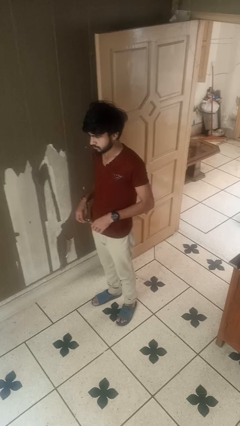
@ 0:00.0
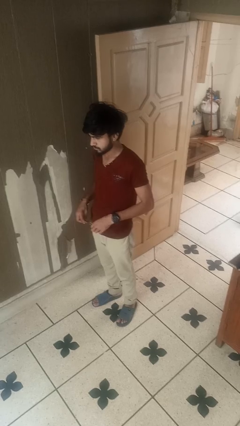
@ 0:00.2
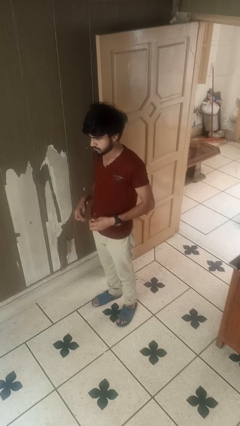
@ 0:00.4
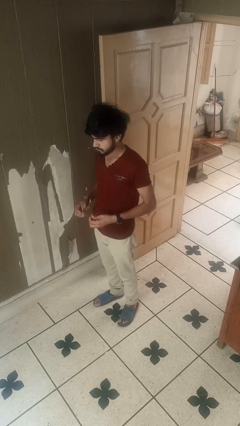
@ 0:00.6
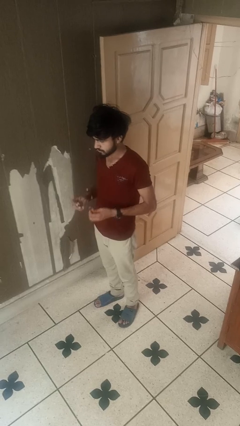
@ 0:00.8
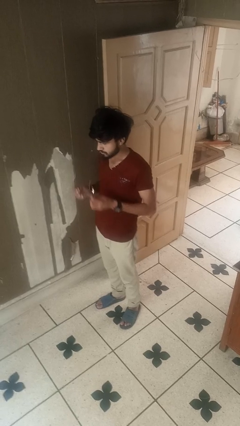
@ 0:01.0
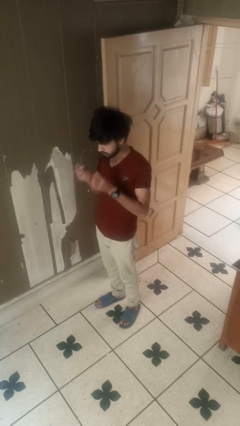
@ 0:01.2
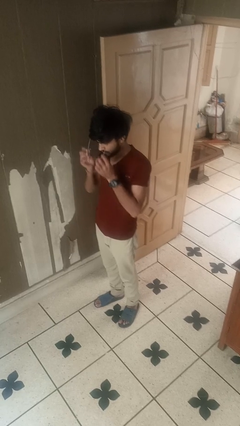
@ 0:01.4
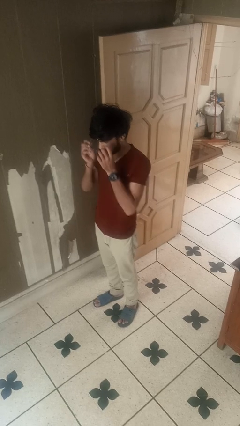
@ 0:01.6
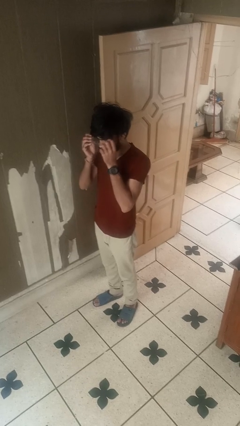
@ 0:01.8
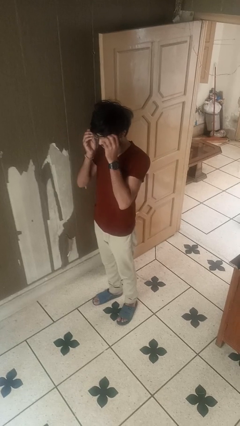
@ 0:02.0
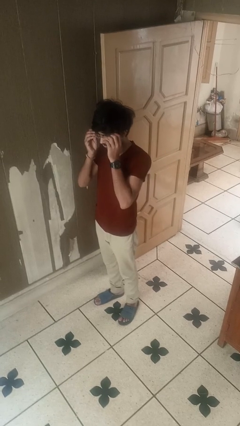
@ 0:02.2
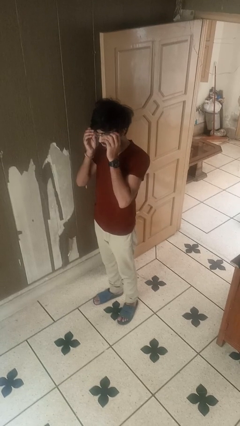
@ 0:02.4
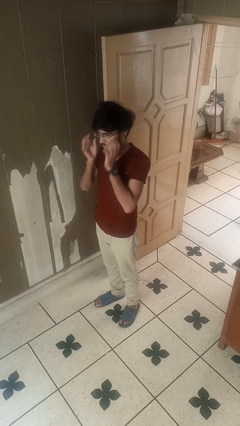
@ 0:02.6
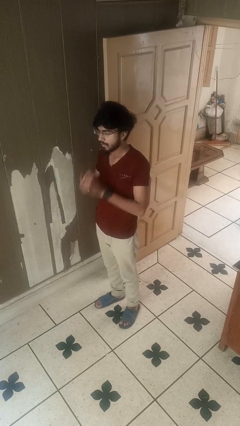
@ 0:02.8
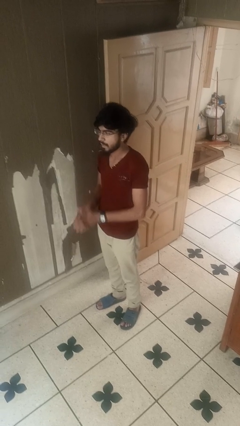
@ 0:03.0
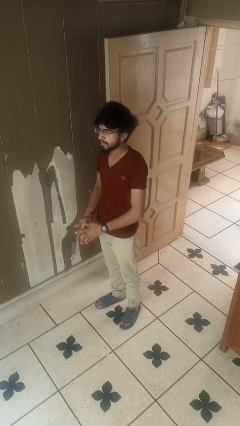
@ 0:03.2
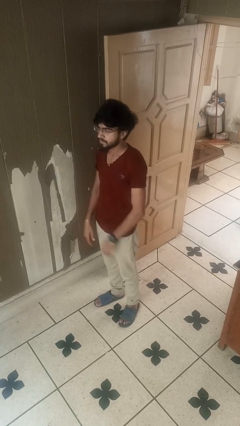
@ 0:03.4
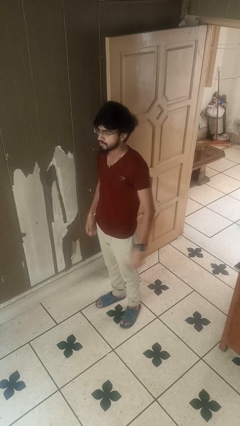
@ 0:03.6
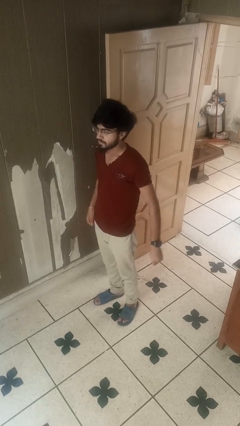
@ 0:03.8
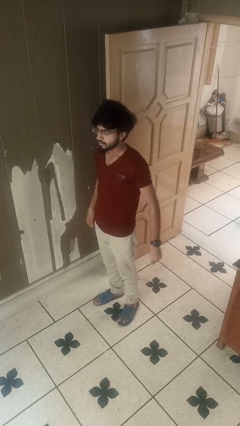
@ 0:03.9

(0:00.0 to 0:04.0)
person puts on glasses

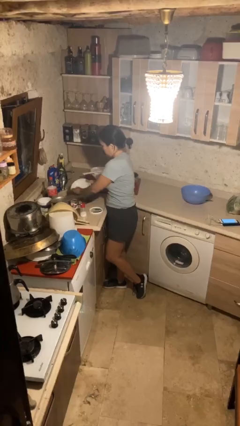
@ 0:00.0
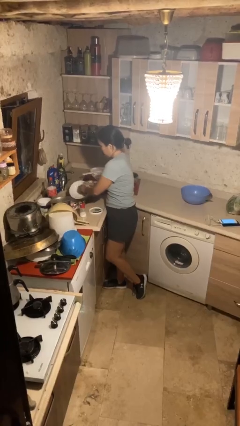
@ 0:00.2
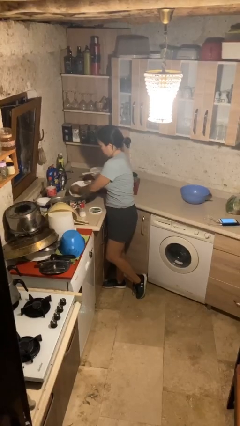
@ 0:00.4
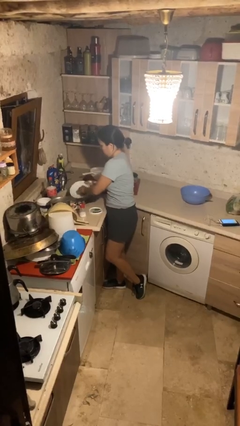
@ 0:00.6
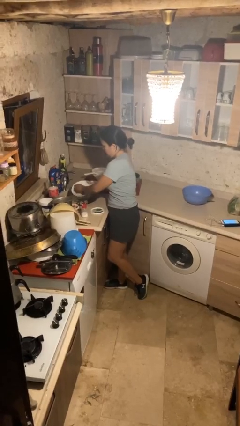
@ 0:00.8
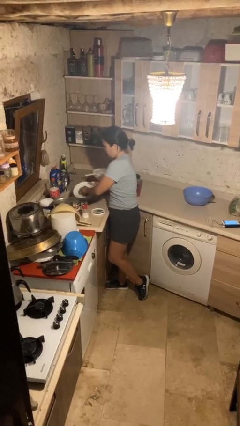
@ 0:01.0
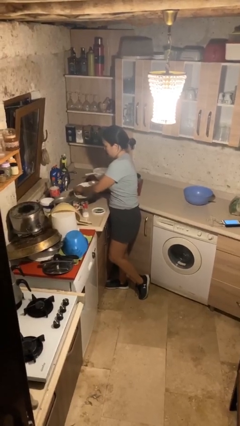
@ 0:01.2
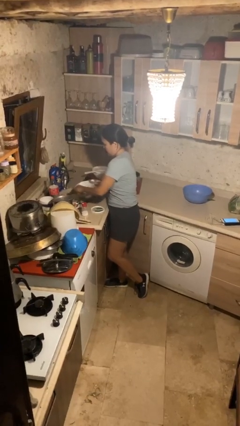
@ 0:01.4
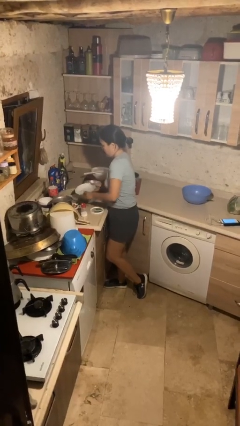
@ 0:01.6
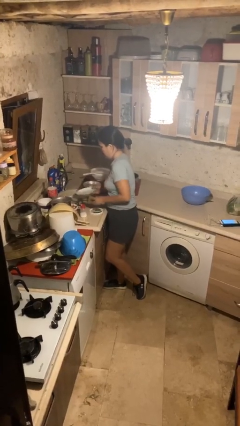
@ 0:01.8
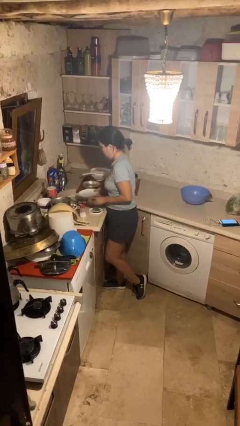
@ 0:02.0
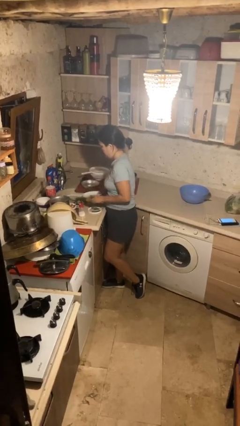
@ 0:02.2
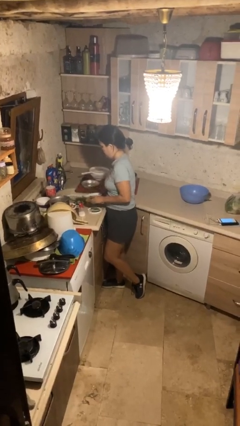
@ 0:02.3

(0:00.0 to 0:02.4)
person washes dish

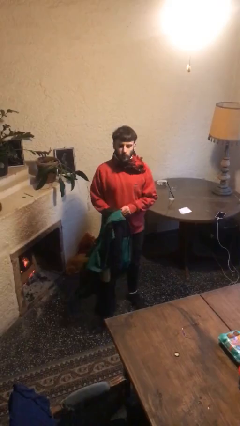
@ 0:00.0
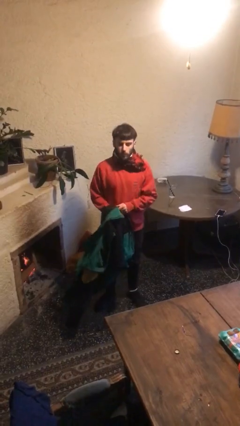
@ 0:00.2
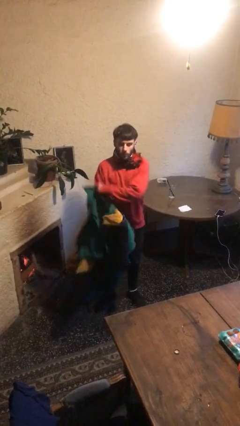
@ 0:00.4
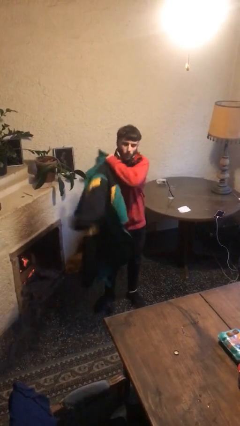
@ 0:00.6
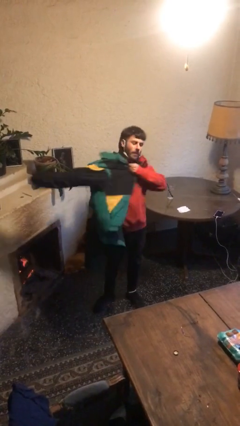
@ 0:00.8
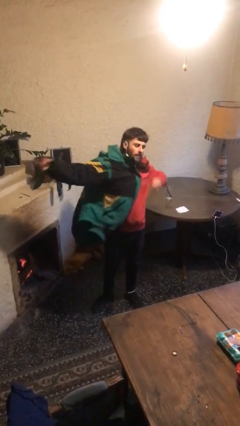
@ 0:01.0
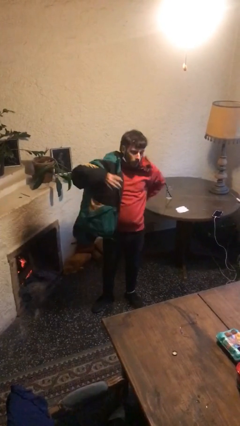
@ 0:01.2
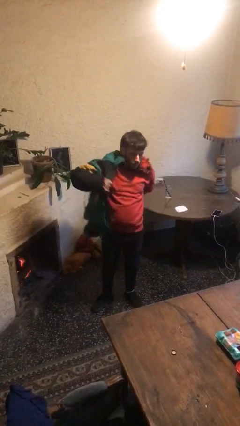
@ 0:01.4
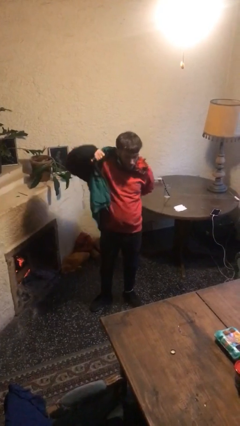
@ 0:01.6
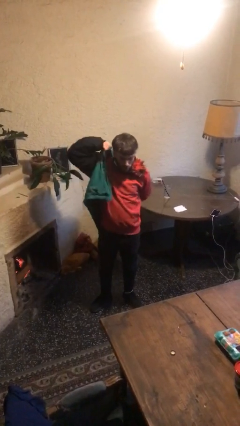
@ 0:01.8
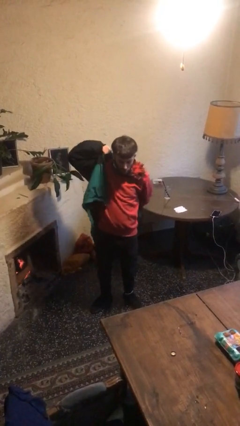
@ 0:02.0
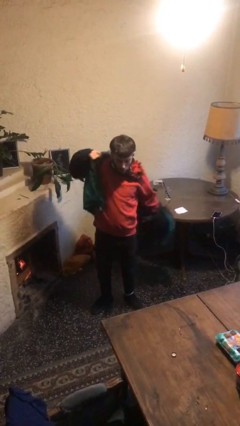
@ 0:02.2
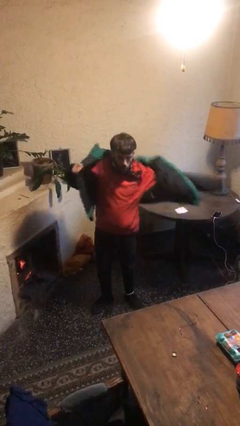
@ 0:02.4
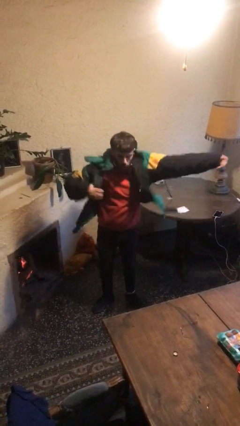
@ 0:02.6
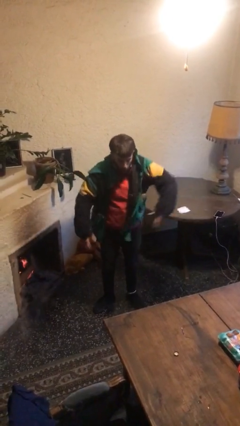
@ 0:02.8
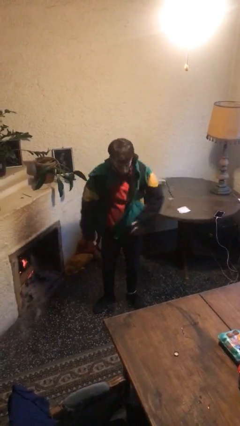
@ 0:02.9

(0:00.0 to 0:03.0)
person puts on jacket

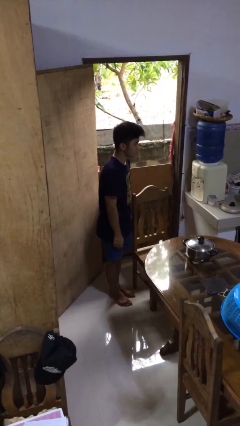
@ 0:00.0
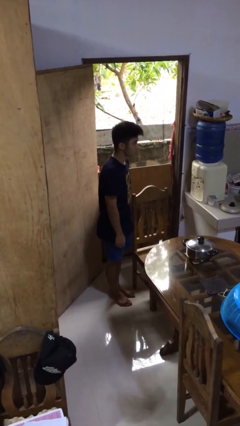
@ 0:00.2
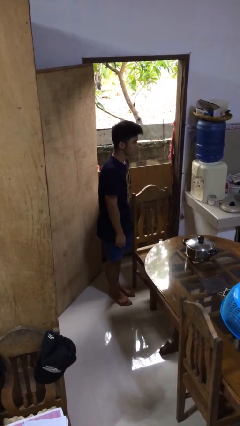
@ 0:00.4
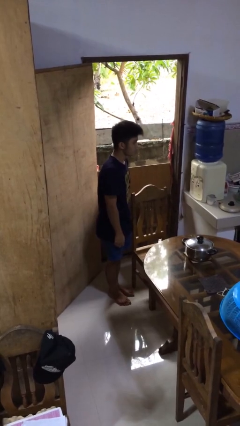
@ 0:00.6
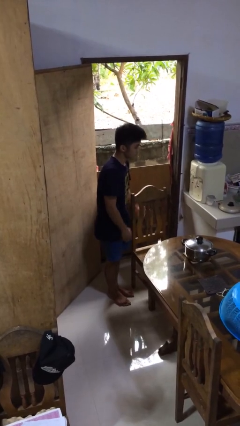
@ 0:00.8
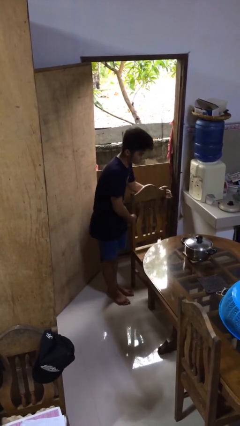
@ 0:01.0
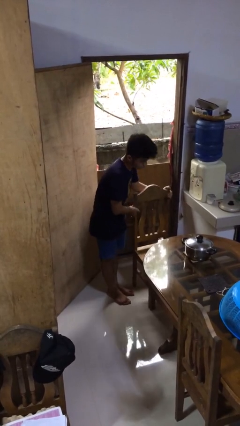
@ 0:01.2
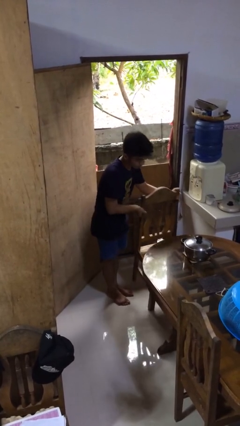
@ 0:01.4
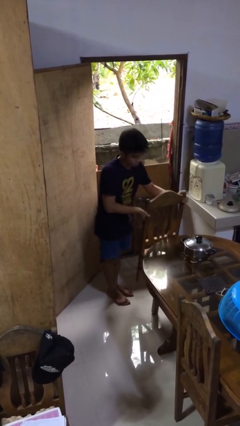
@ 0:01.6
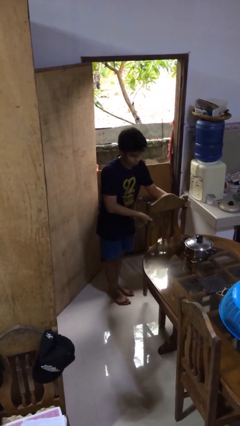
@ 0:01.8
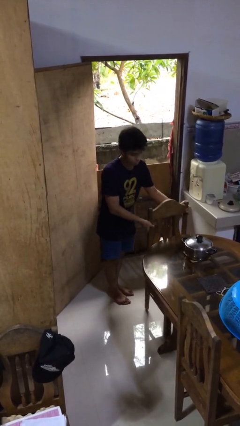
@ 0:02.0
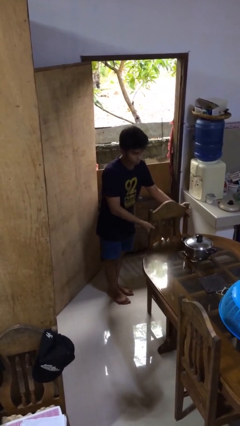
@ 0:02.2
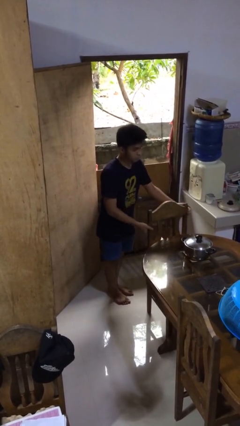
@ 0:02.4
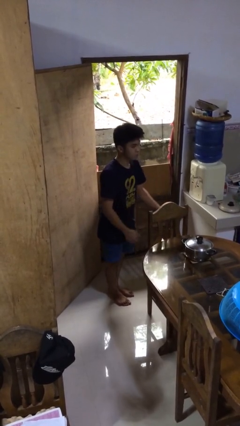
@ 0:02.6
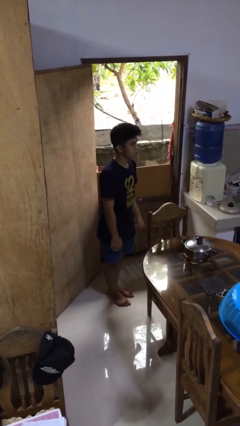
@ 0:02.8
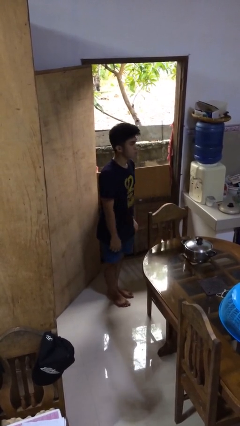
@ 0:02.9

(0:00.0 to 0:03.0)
person pushes in chair

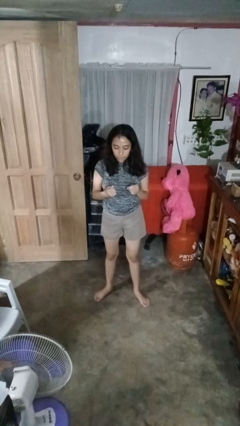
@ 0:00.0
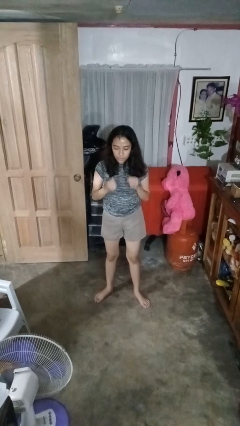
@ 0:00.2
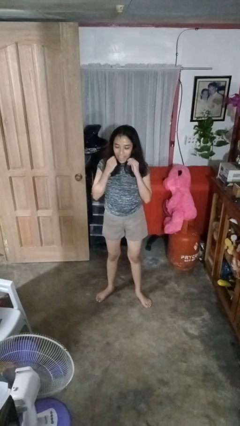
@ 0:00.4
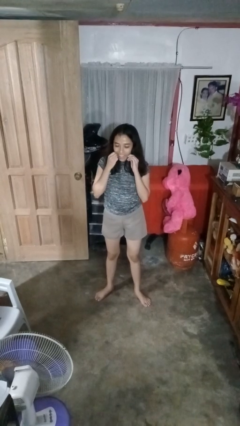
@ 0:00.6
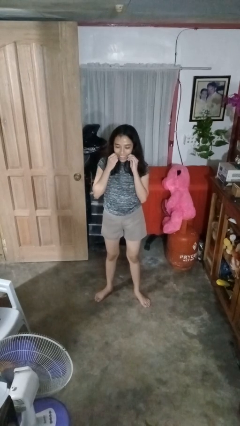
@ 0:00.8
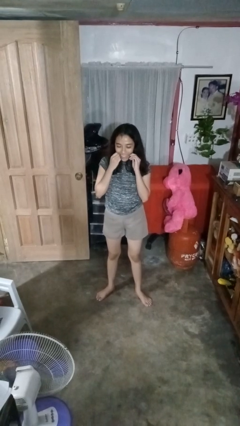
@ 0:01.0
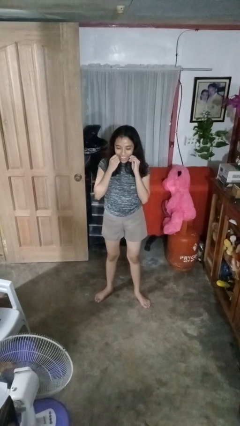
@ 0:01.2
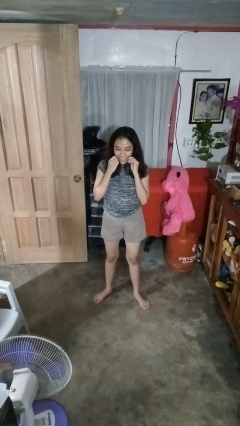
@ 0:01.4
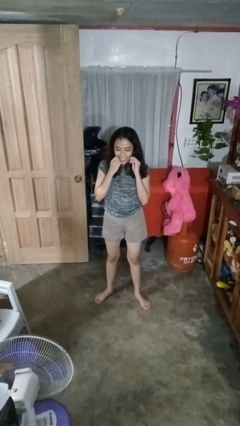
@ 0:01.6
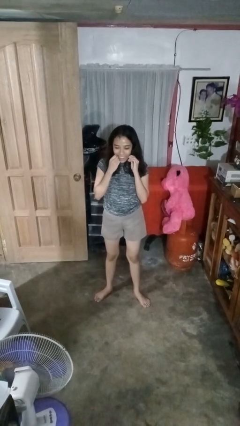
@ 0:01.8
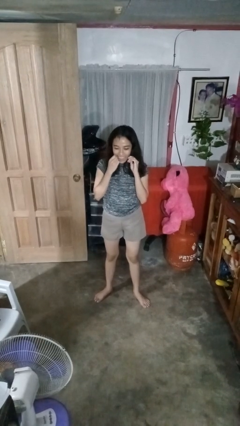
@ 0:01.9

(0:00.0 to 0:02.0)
person flosses

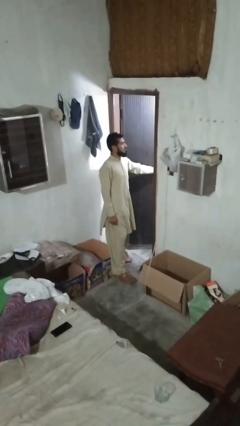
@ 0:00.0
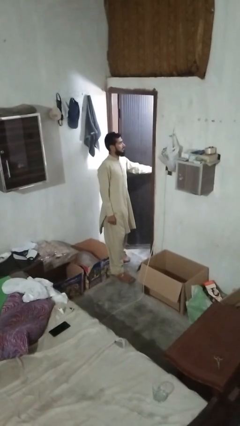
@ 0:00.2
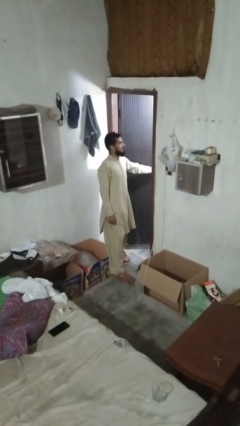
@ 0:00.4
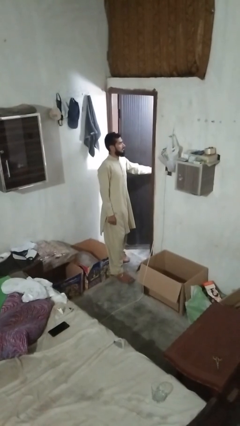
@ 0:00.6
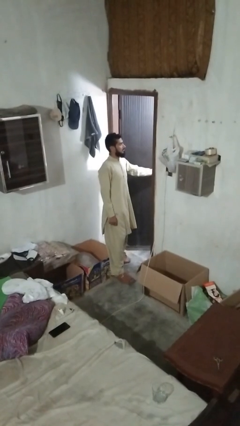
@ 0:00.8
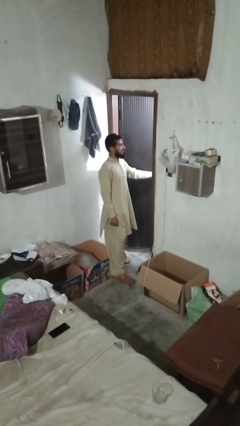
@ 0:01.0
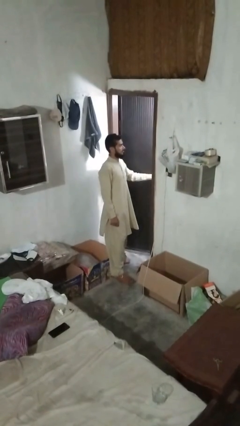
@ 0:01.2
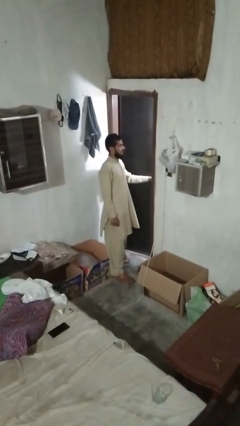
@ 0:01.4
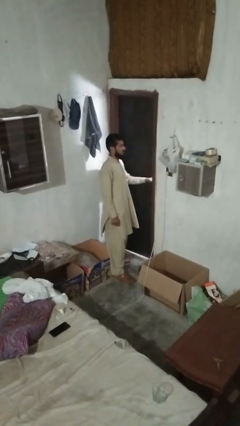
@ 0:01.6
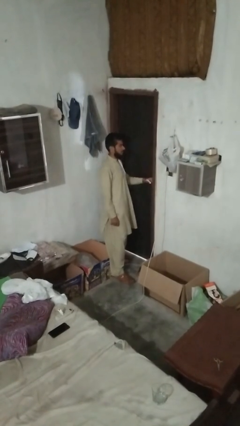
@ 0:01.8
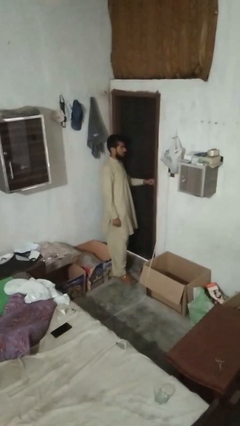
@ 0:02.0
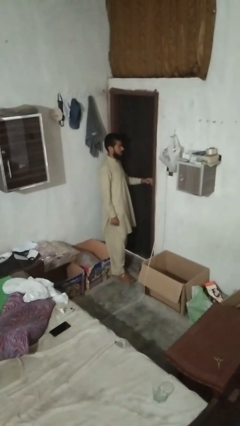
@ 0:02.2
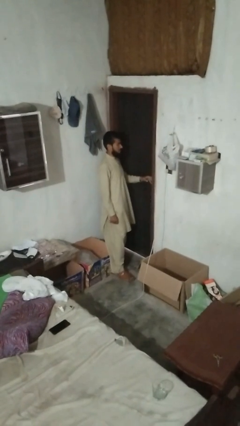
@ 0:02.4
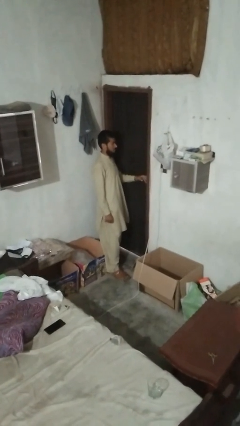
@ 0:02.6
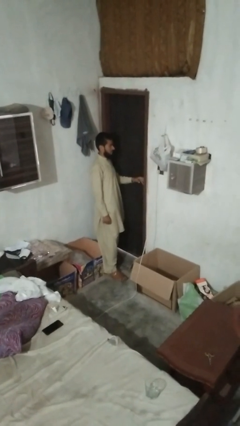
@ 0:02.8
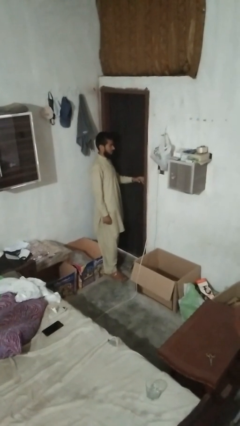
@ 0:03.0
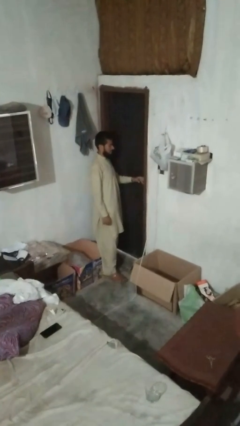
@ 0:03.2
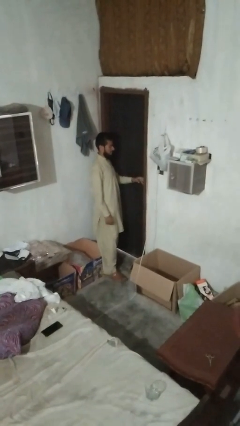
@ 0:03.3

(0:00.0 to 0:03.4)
person closes facility door
